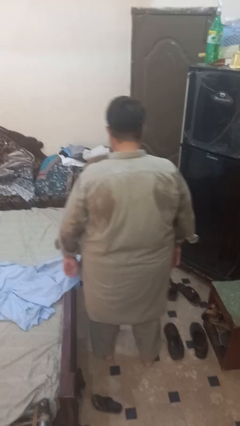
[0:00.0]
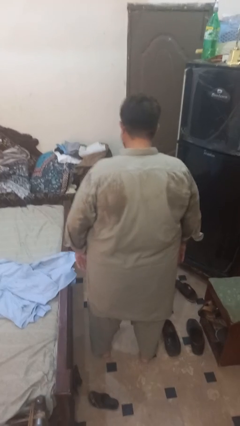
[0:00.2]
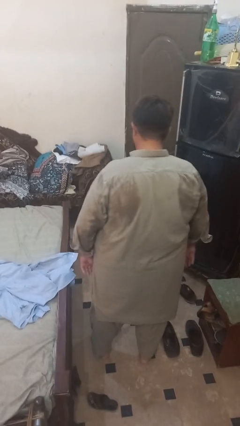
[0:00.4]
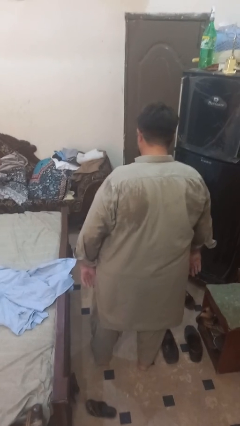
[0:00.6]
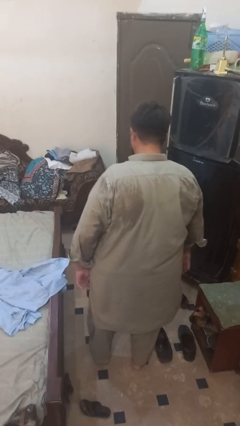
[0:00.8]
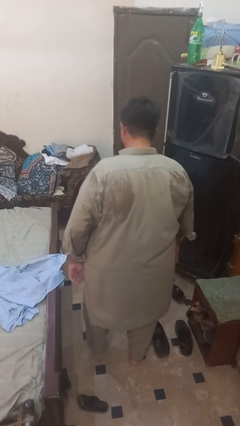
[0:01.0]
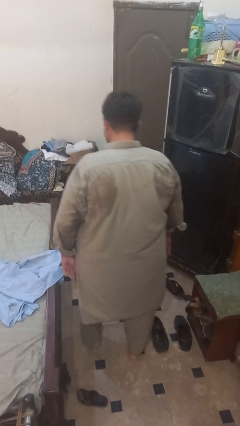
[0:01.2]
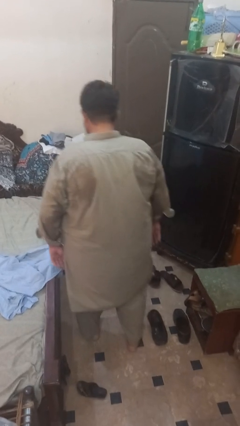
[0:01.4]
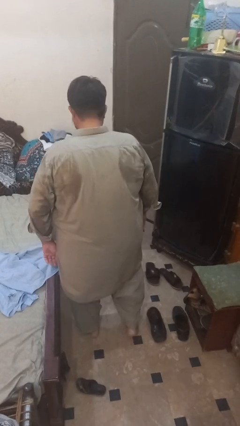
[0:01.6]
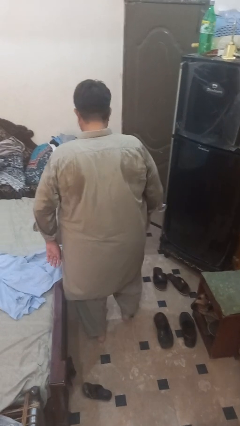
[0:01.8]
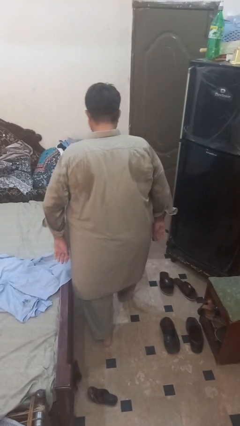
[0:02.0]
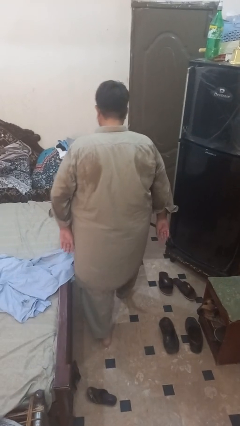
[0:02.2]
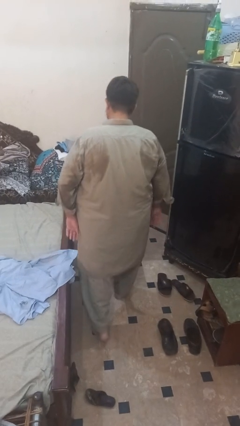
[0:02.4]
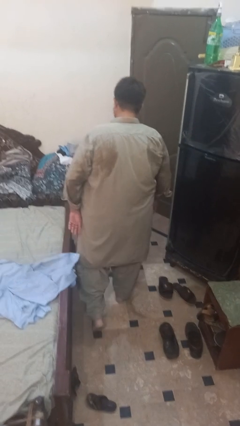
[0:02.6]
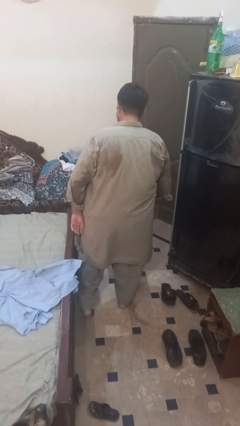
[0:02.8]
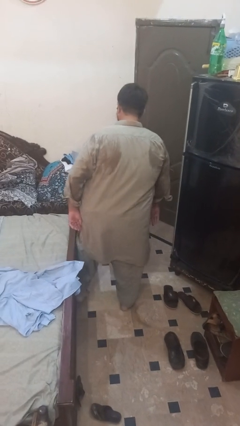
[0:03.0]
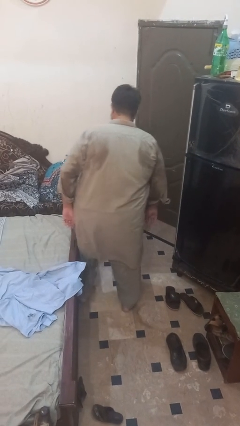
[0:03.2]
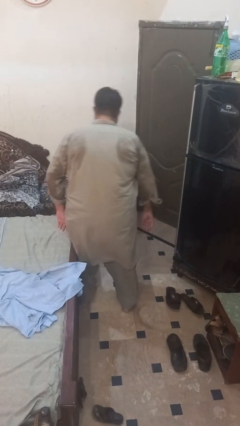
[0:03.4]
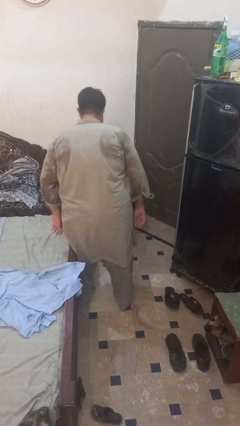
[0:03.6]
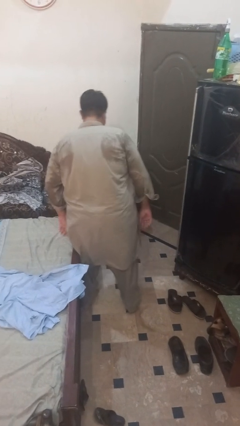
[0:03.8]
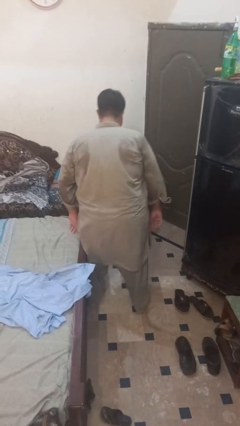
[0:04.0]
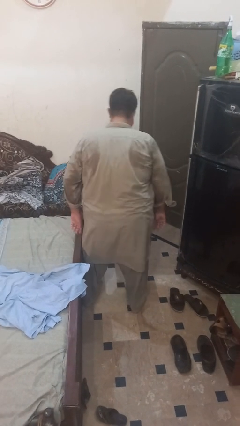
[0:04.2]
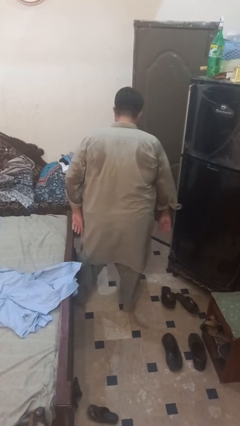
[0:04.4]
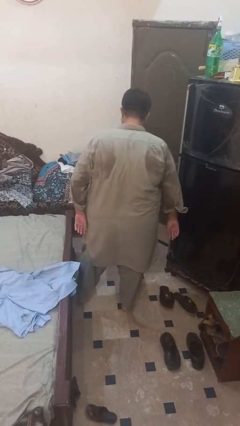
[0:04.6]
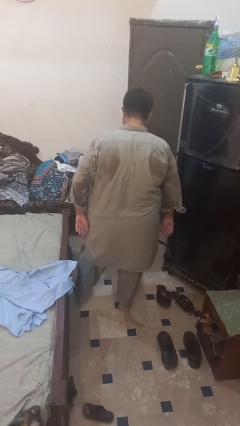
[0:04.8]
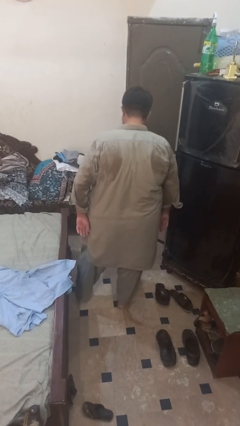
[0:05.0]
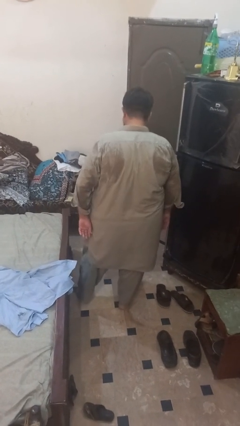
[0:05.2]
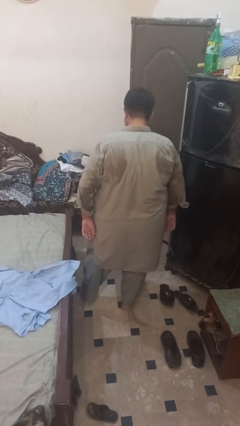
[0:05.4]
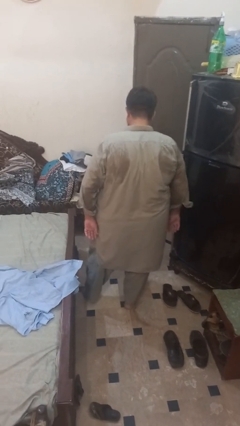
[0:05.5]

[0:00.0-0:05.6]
person stubs toe

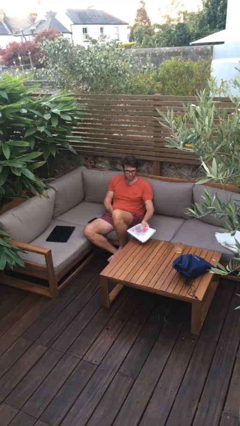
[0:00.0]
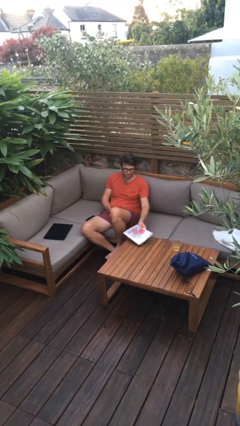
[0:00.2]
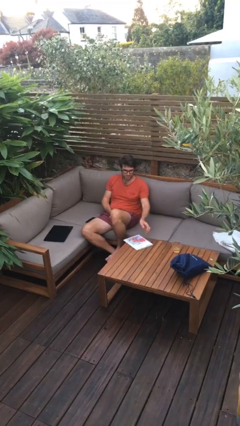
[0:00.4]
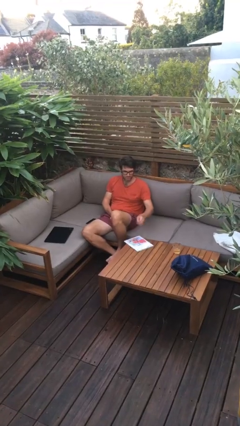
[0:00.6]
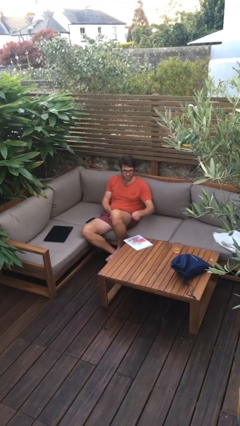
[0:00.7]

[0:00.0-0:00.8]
person puts down object on table

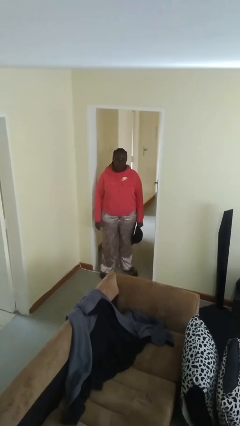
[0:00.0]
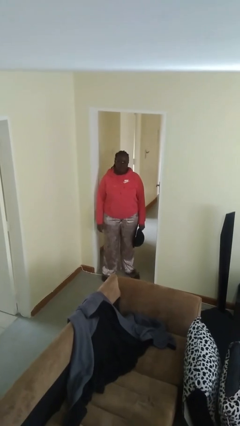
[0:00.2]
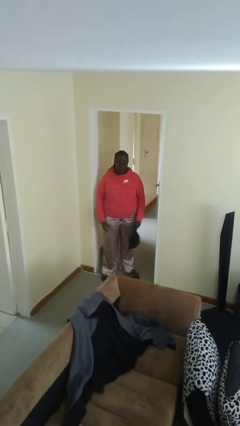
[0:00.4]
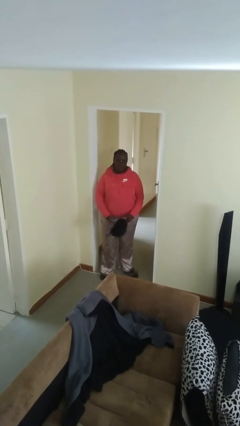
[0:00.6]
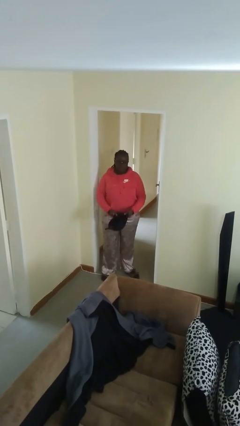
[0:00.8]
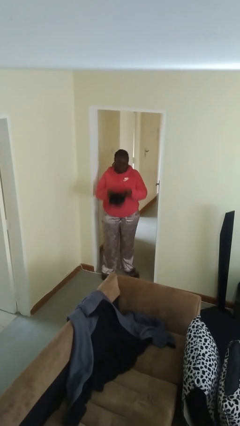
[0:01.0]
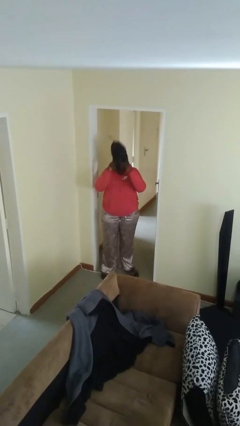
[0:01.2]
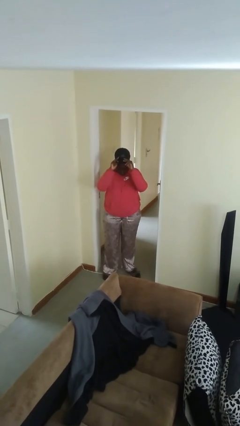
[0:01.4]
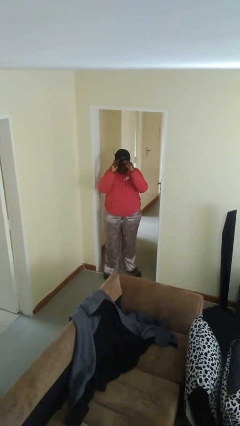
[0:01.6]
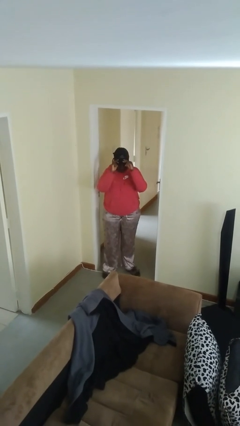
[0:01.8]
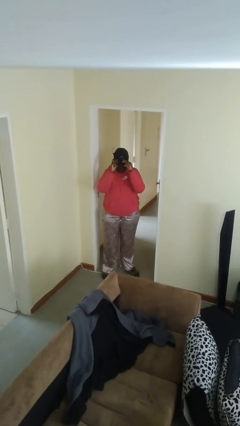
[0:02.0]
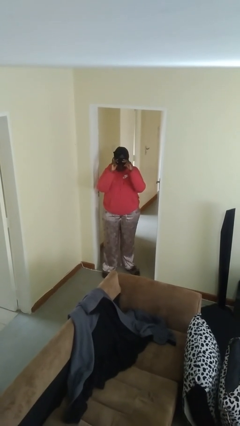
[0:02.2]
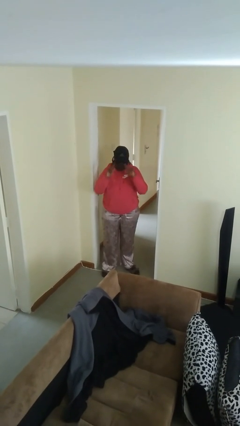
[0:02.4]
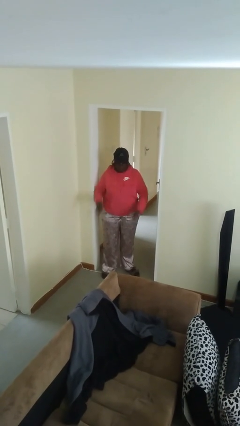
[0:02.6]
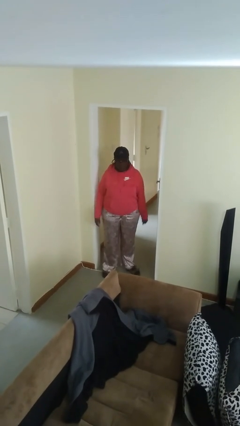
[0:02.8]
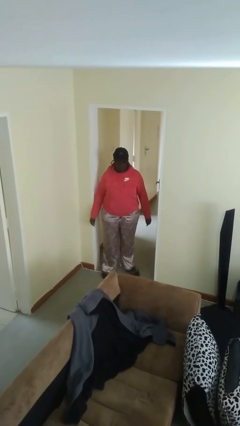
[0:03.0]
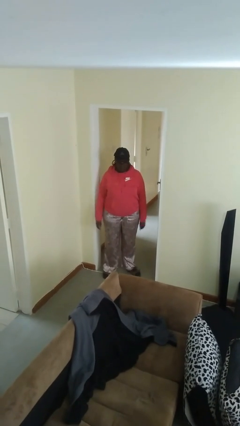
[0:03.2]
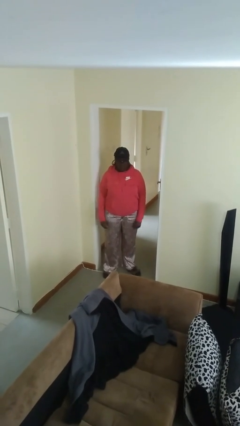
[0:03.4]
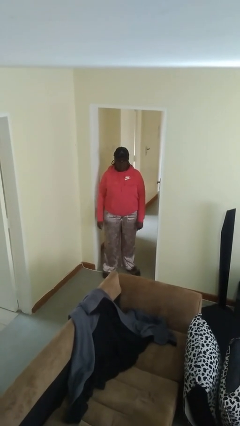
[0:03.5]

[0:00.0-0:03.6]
person puts on hat

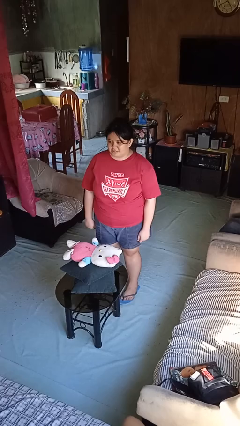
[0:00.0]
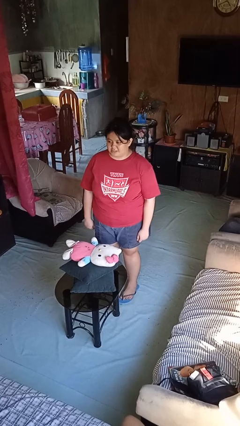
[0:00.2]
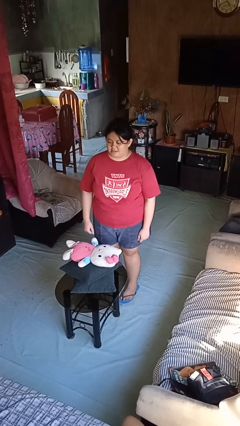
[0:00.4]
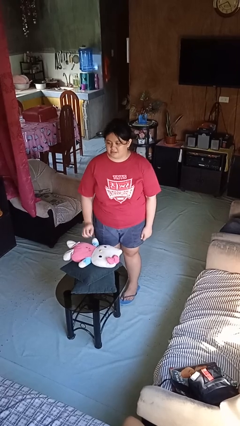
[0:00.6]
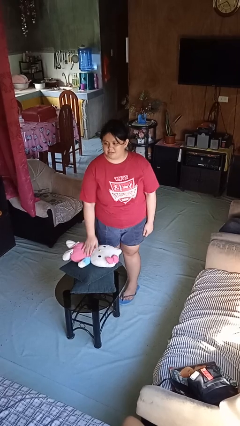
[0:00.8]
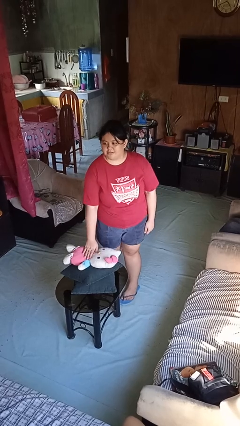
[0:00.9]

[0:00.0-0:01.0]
person taps object with finger

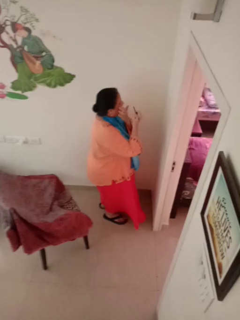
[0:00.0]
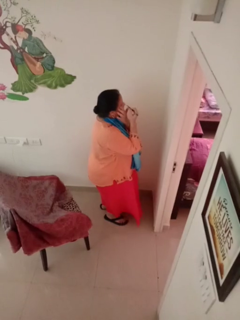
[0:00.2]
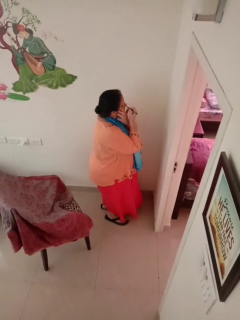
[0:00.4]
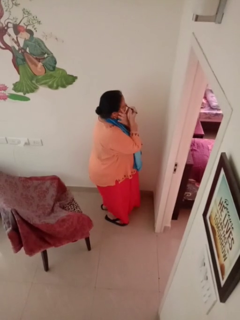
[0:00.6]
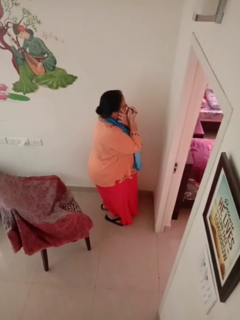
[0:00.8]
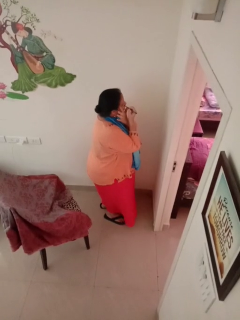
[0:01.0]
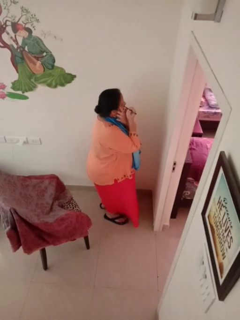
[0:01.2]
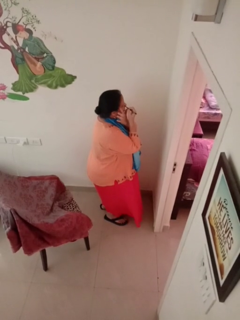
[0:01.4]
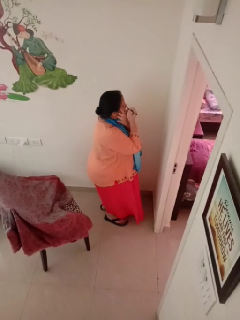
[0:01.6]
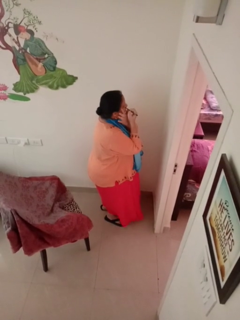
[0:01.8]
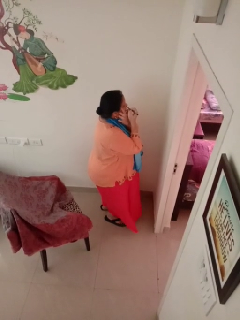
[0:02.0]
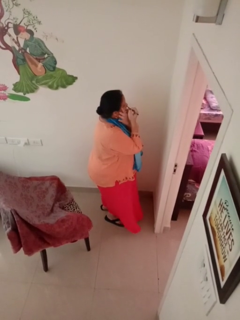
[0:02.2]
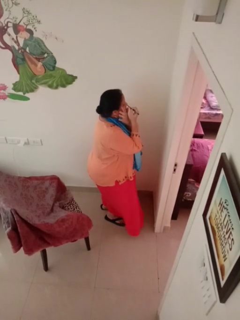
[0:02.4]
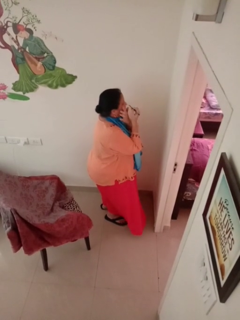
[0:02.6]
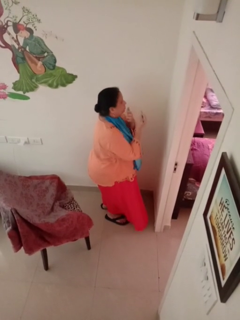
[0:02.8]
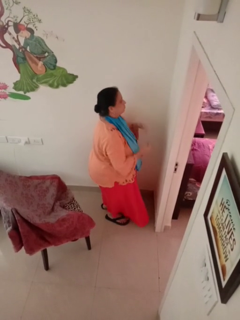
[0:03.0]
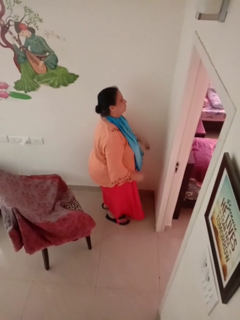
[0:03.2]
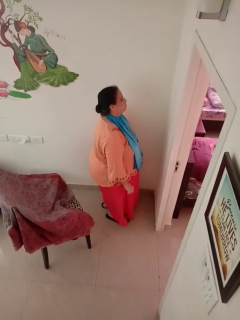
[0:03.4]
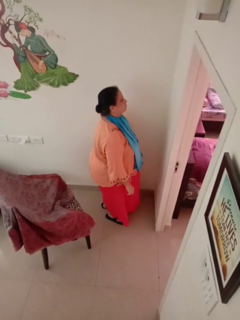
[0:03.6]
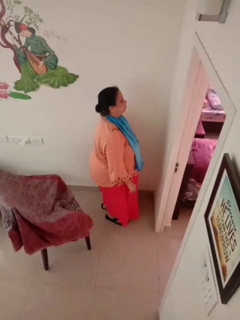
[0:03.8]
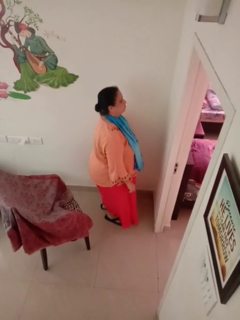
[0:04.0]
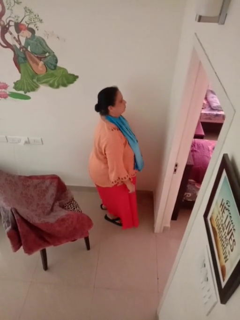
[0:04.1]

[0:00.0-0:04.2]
person applies eye makeup

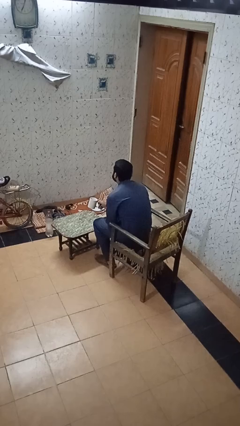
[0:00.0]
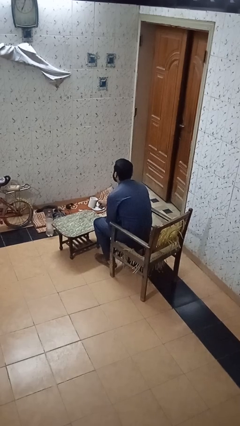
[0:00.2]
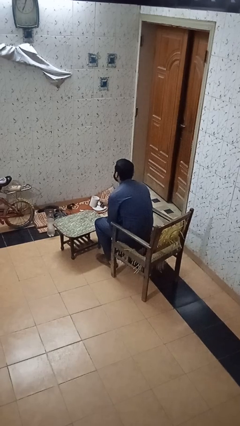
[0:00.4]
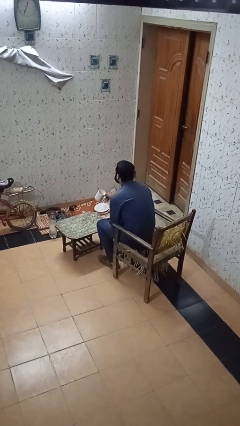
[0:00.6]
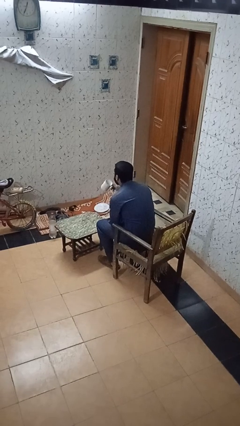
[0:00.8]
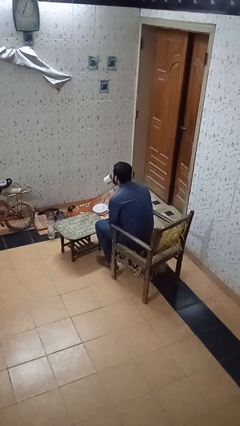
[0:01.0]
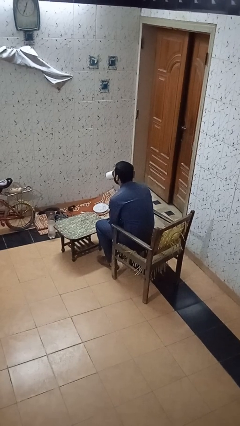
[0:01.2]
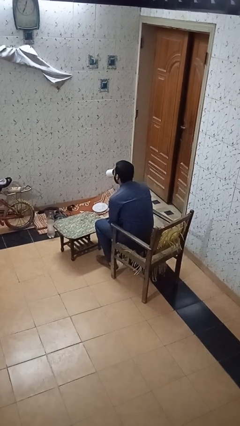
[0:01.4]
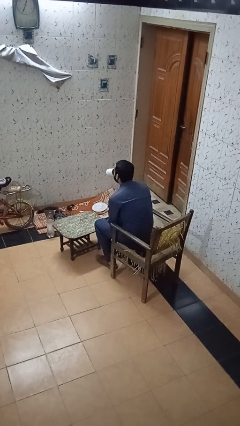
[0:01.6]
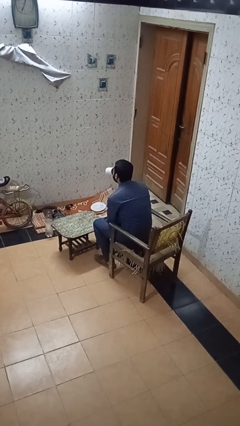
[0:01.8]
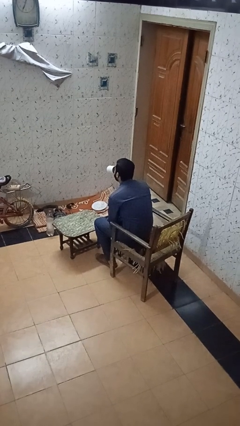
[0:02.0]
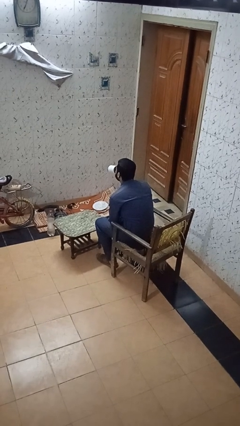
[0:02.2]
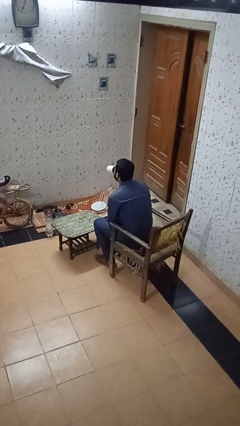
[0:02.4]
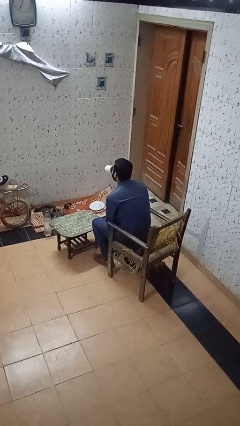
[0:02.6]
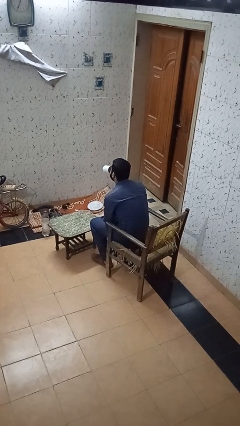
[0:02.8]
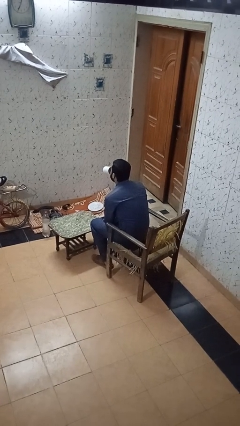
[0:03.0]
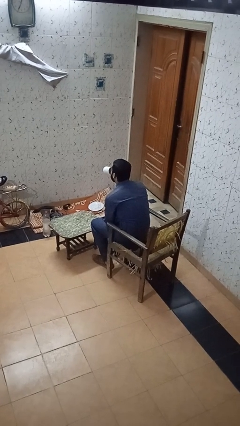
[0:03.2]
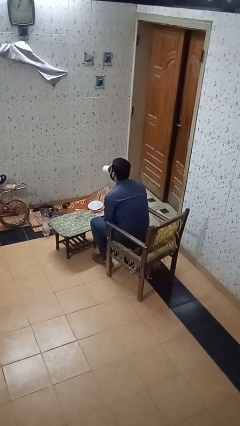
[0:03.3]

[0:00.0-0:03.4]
person drinks from mug
